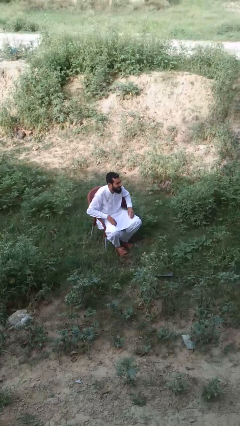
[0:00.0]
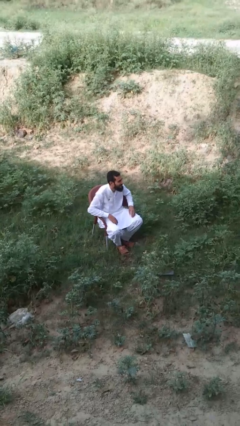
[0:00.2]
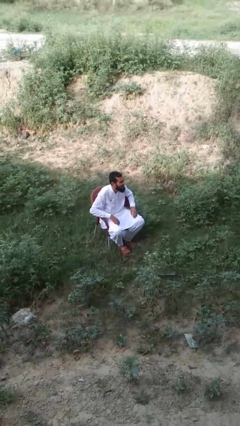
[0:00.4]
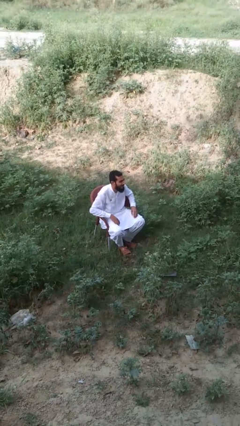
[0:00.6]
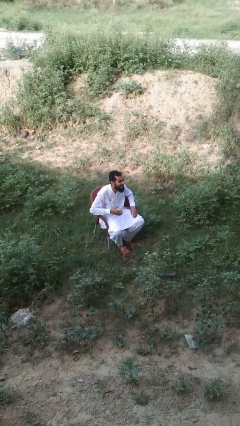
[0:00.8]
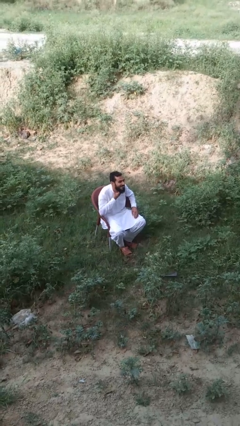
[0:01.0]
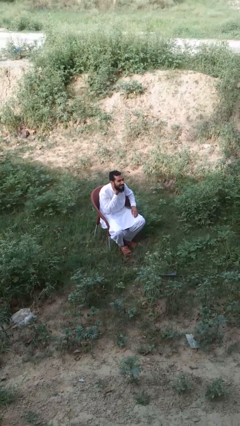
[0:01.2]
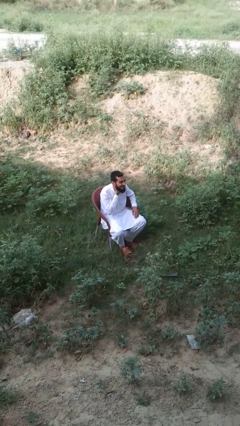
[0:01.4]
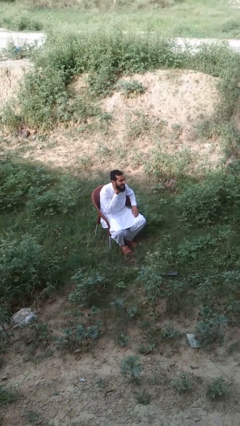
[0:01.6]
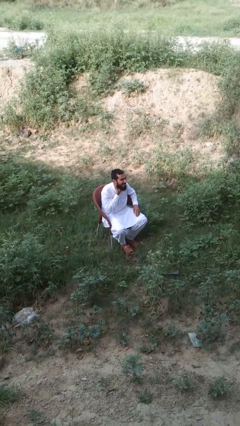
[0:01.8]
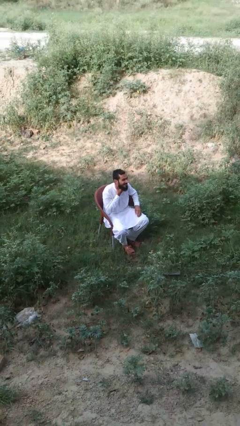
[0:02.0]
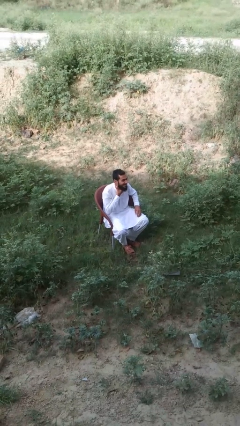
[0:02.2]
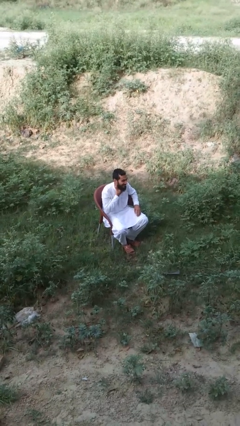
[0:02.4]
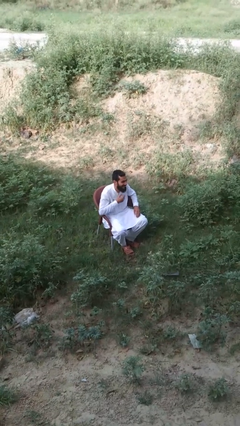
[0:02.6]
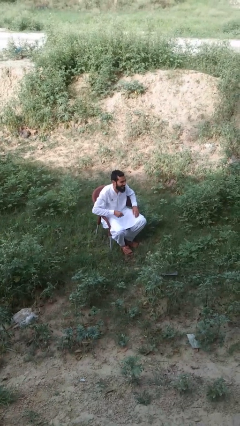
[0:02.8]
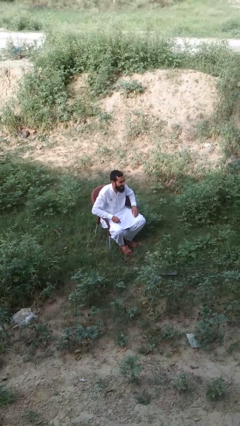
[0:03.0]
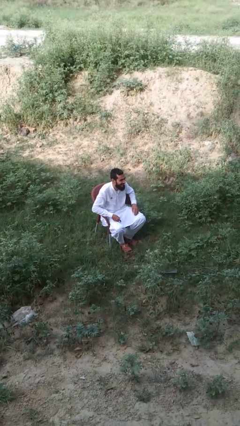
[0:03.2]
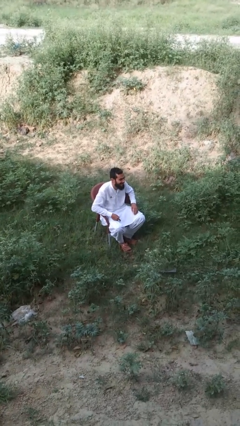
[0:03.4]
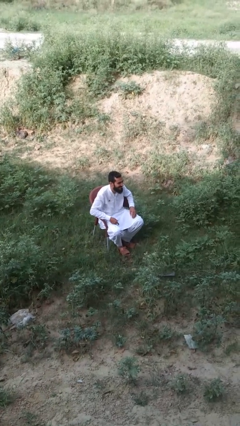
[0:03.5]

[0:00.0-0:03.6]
person rubs neck

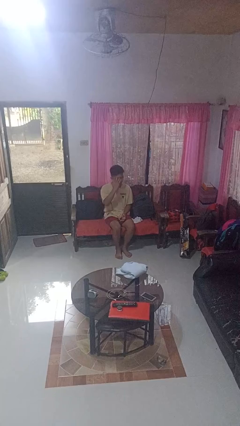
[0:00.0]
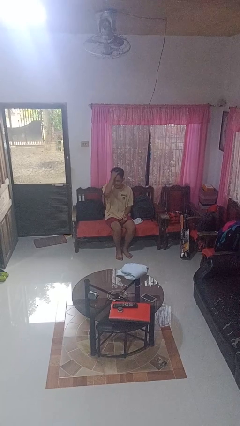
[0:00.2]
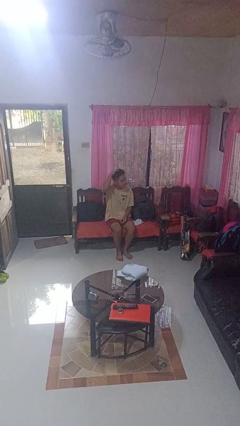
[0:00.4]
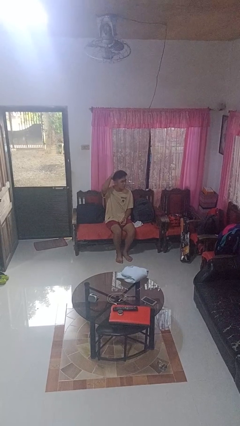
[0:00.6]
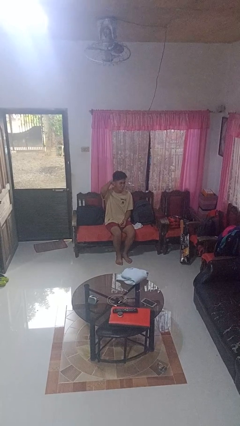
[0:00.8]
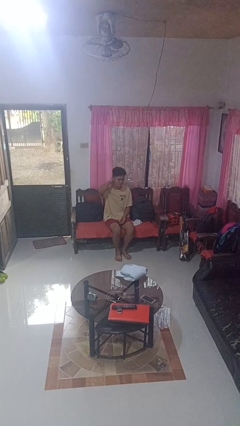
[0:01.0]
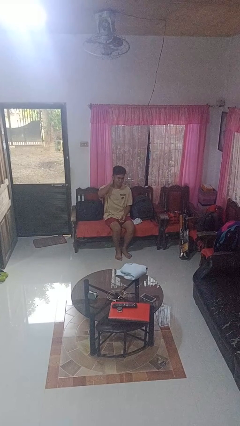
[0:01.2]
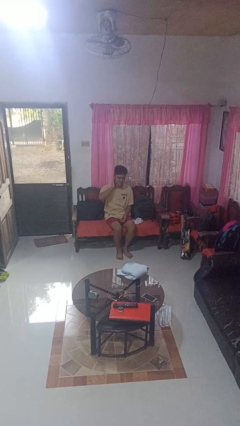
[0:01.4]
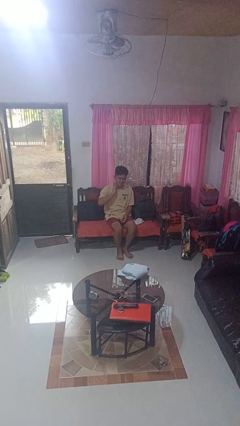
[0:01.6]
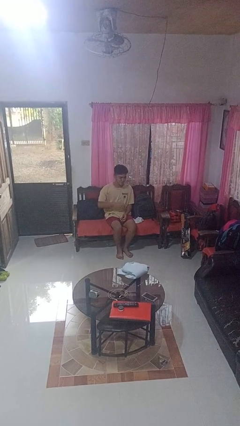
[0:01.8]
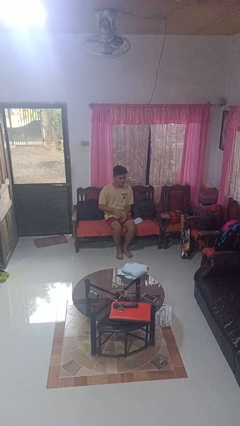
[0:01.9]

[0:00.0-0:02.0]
person strokes hair

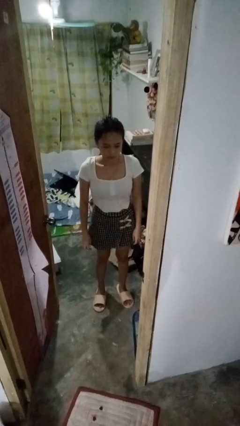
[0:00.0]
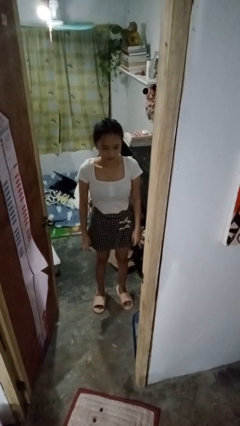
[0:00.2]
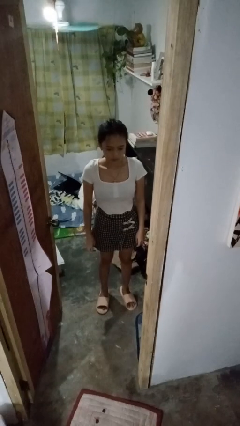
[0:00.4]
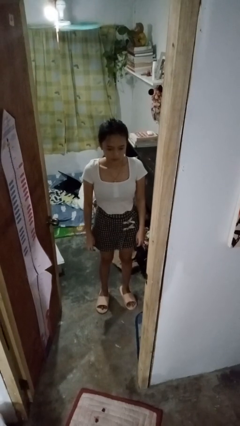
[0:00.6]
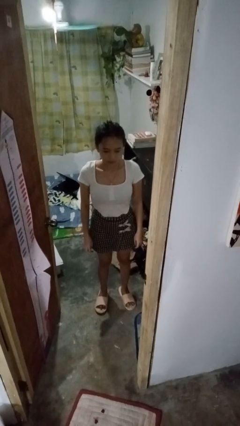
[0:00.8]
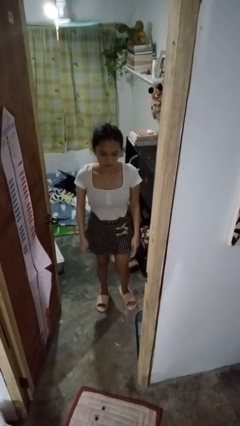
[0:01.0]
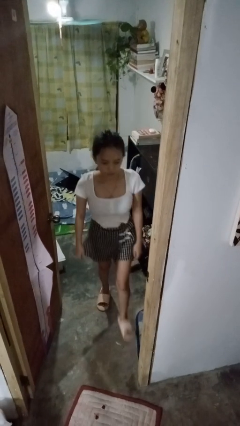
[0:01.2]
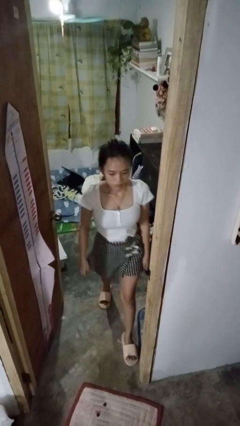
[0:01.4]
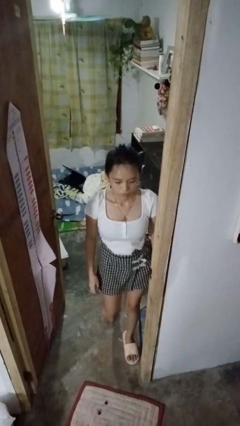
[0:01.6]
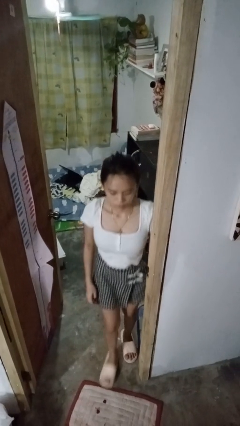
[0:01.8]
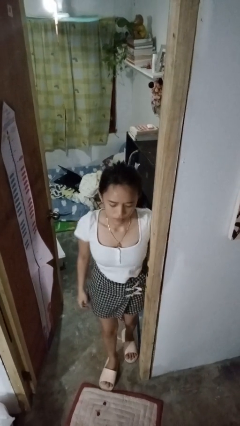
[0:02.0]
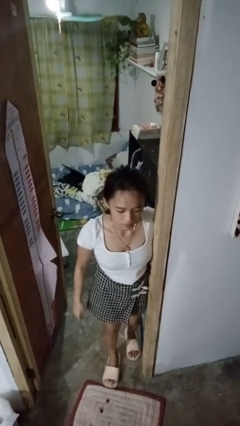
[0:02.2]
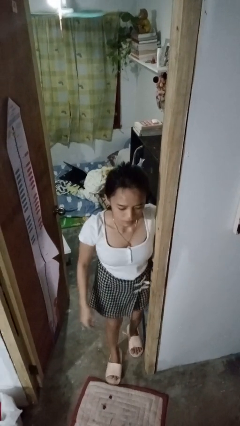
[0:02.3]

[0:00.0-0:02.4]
person bumps into wall

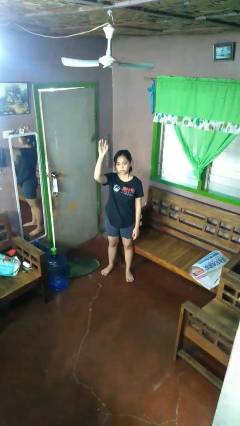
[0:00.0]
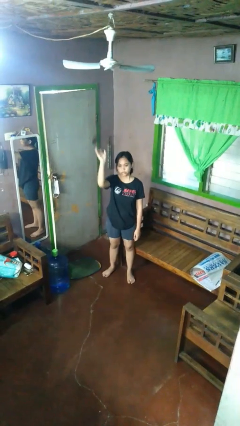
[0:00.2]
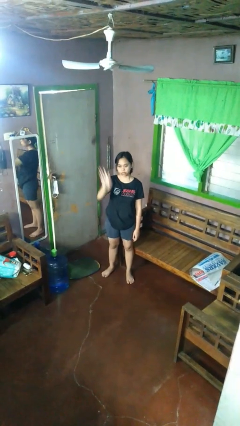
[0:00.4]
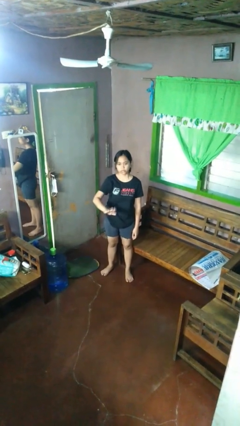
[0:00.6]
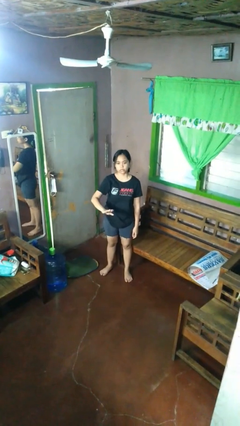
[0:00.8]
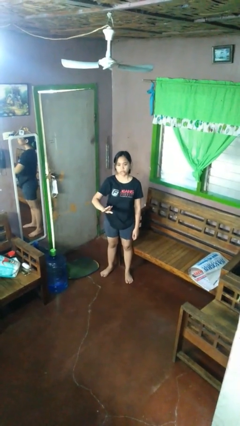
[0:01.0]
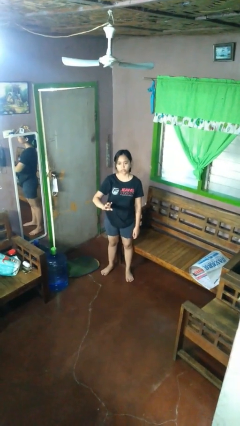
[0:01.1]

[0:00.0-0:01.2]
person gestures swipe down

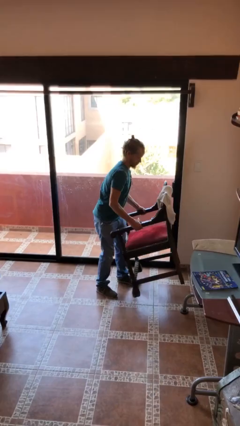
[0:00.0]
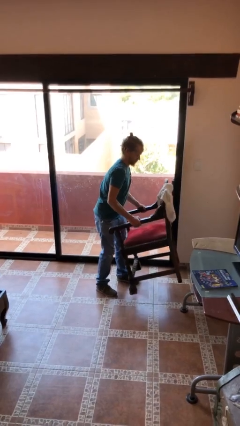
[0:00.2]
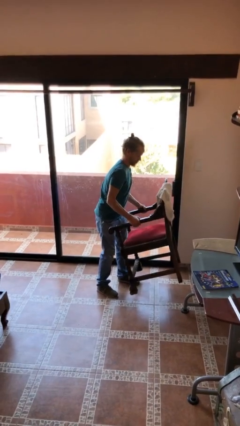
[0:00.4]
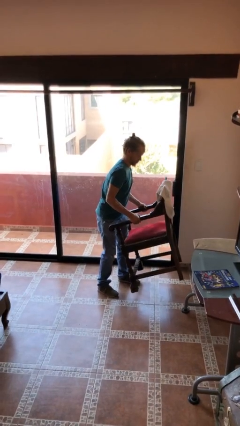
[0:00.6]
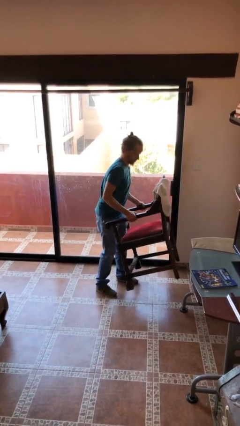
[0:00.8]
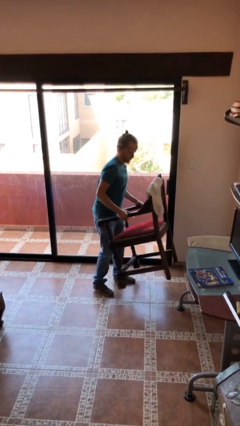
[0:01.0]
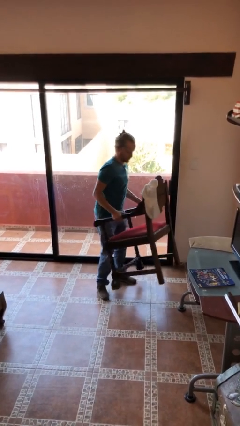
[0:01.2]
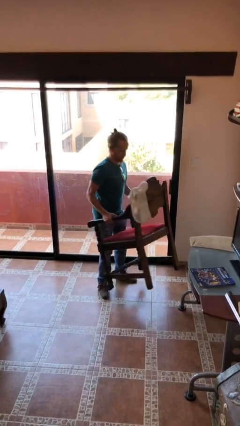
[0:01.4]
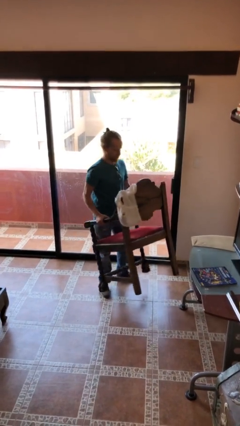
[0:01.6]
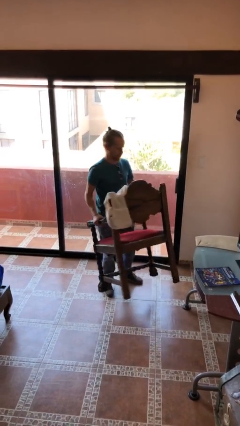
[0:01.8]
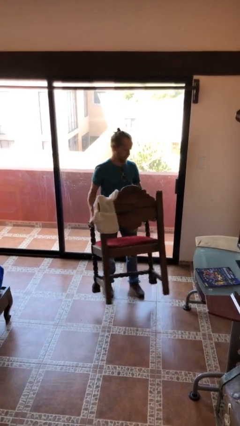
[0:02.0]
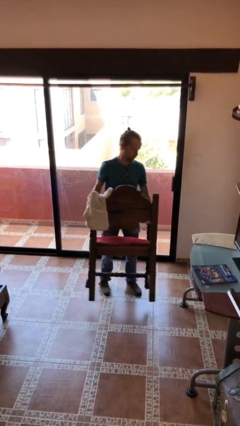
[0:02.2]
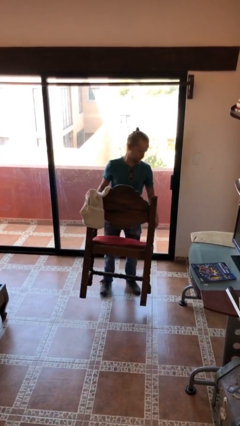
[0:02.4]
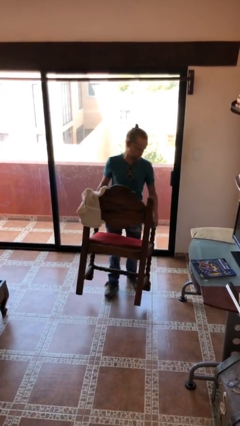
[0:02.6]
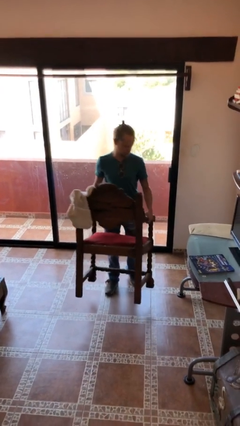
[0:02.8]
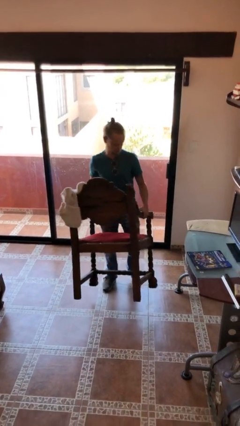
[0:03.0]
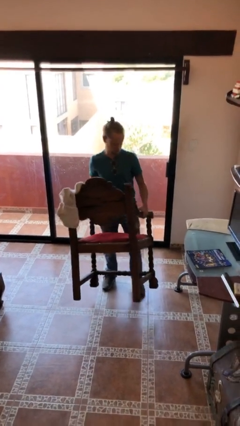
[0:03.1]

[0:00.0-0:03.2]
person carries heavy object

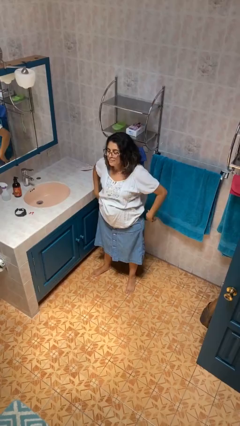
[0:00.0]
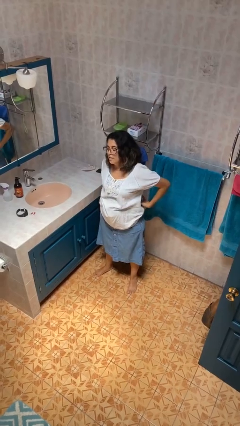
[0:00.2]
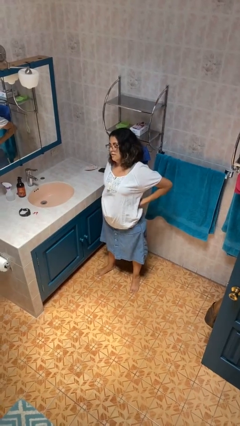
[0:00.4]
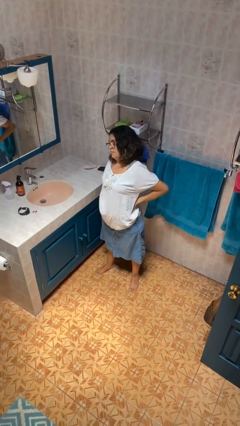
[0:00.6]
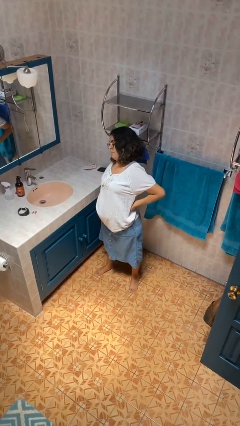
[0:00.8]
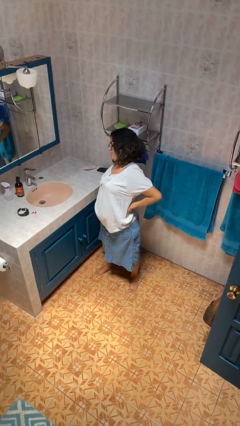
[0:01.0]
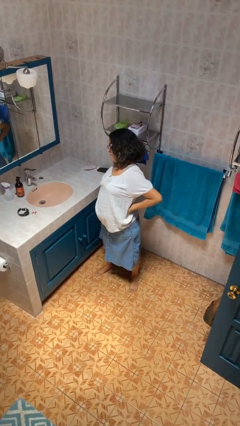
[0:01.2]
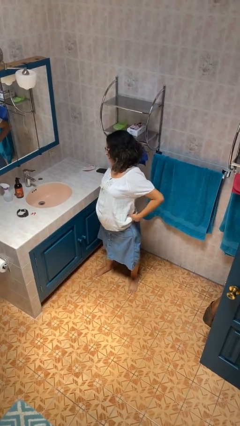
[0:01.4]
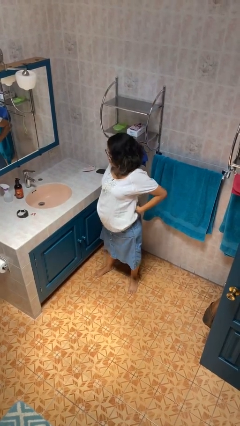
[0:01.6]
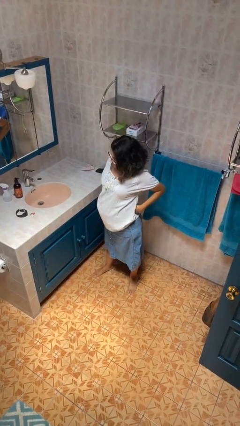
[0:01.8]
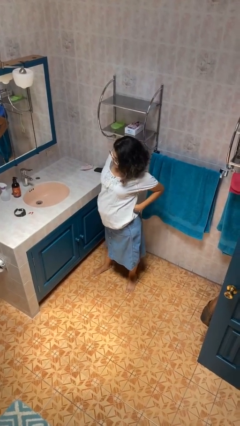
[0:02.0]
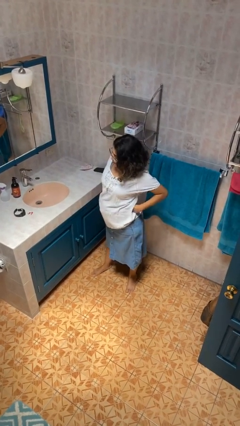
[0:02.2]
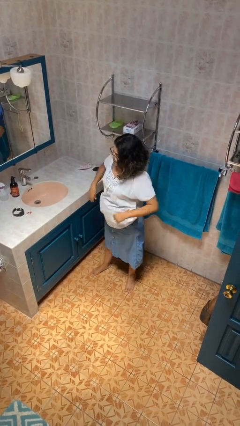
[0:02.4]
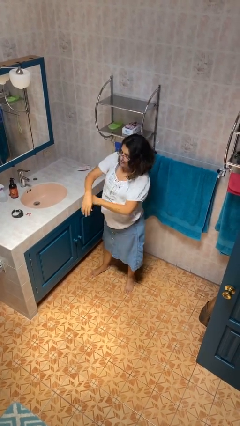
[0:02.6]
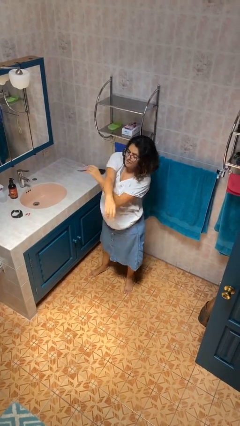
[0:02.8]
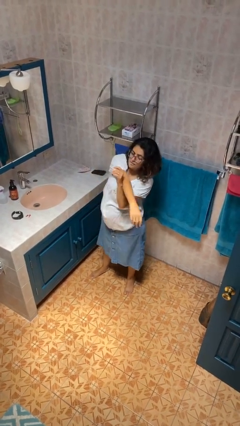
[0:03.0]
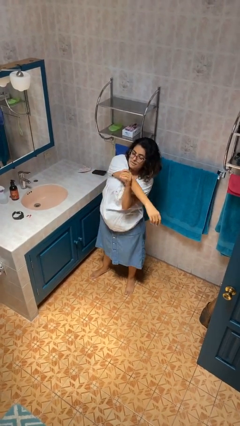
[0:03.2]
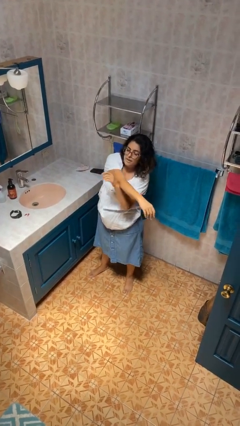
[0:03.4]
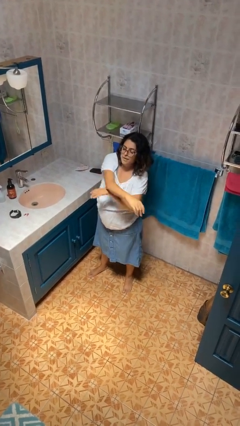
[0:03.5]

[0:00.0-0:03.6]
person stretches back

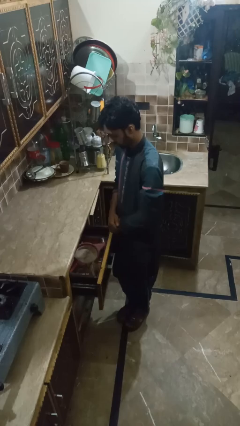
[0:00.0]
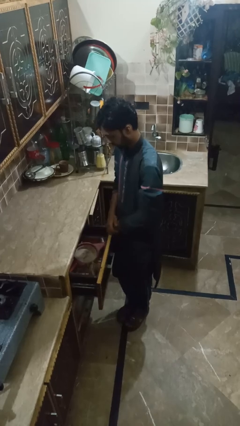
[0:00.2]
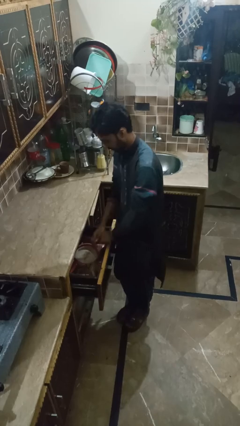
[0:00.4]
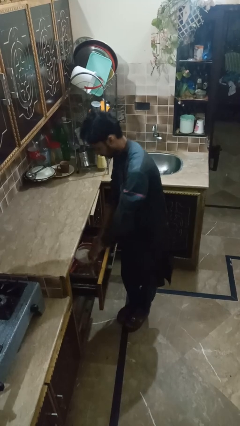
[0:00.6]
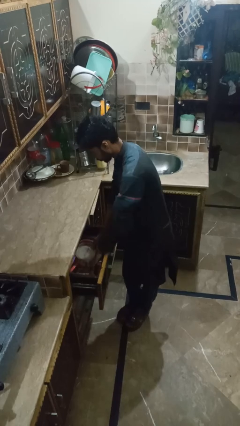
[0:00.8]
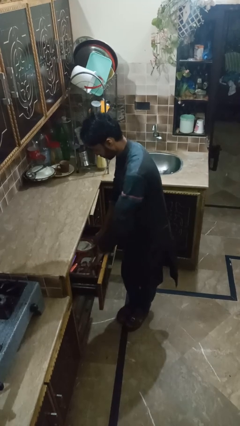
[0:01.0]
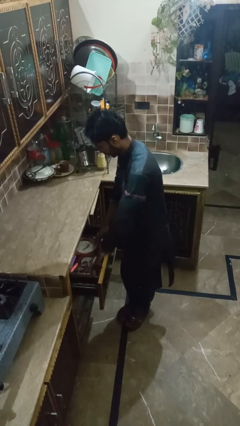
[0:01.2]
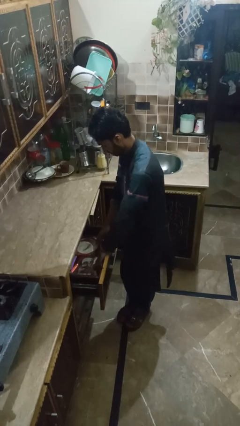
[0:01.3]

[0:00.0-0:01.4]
person searches in kitchen drawer
